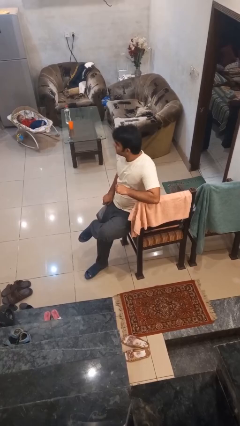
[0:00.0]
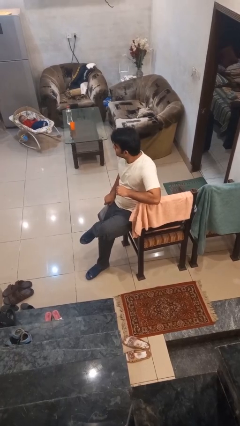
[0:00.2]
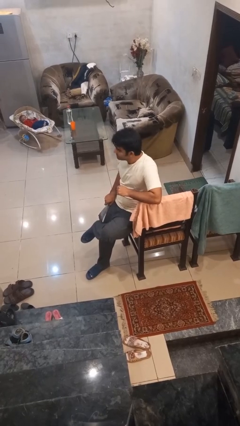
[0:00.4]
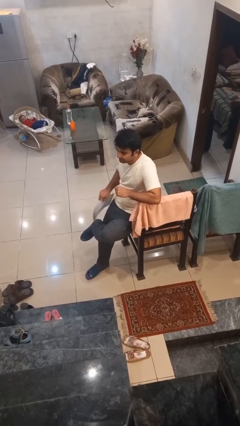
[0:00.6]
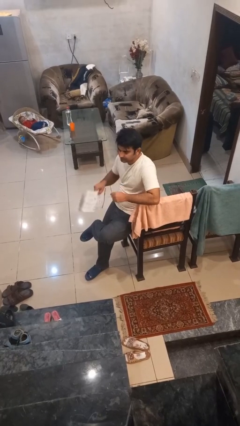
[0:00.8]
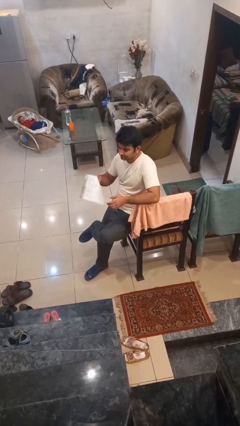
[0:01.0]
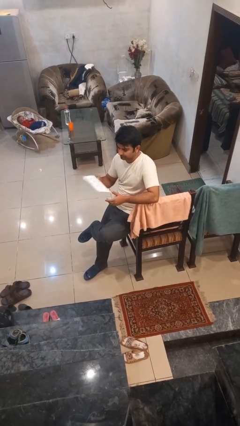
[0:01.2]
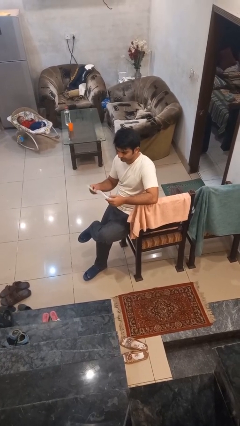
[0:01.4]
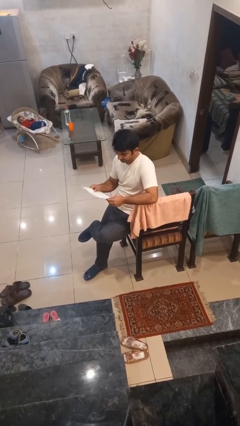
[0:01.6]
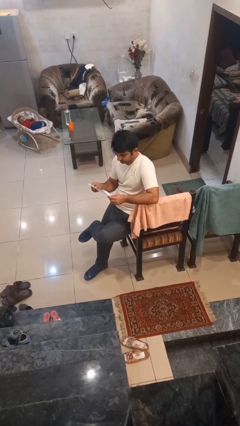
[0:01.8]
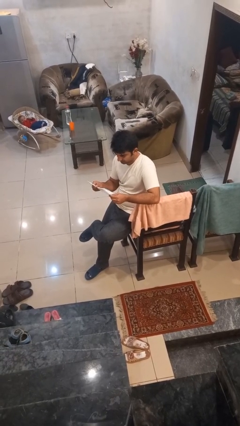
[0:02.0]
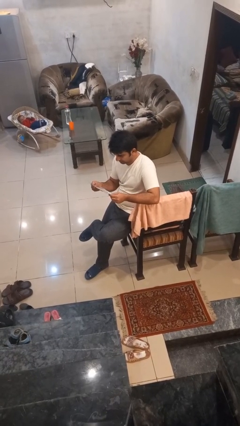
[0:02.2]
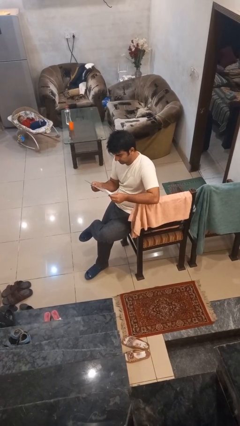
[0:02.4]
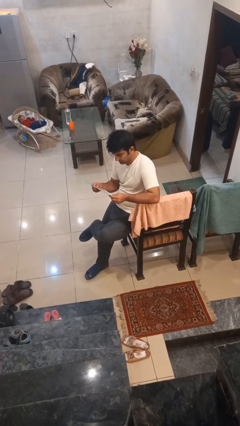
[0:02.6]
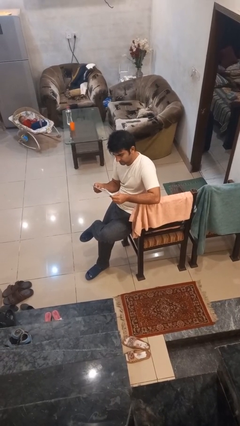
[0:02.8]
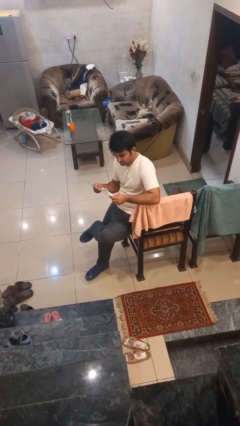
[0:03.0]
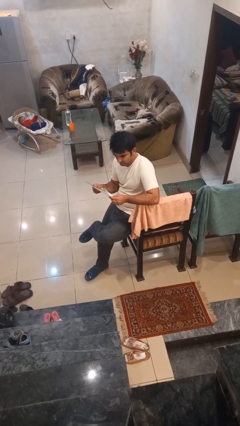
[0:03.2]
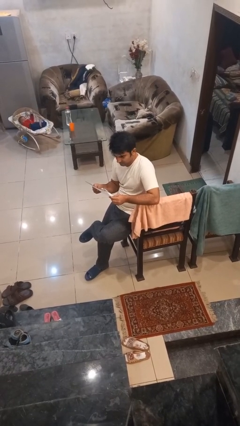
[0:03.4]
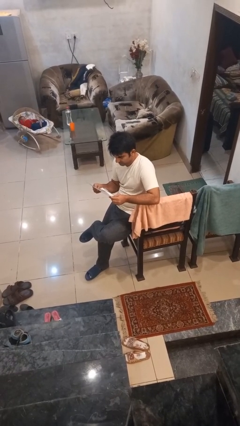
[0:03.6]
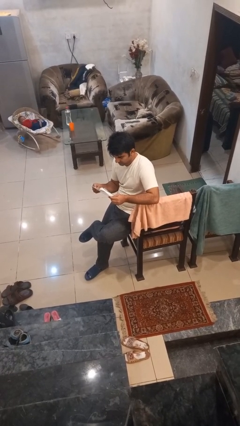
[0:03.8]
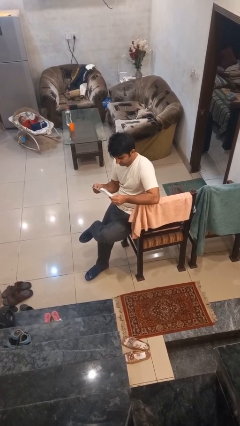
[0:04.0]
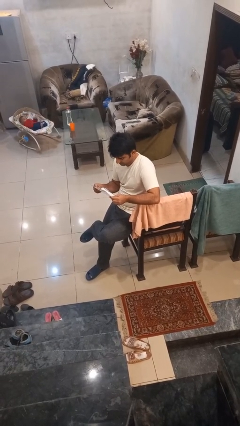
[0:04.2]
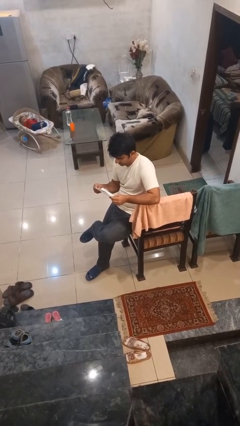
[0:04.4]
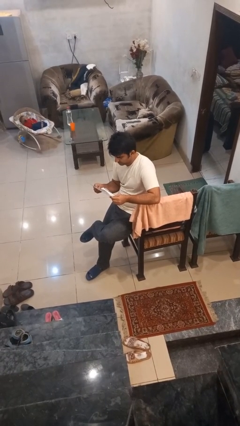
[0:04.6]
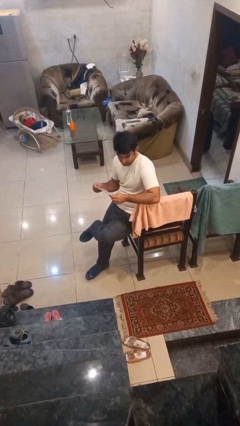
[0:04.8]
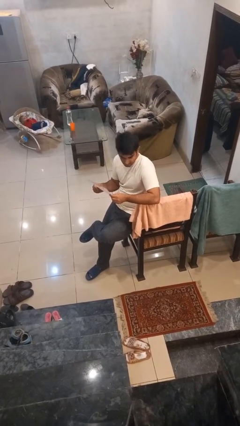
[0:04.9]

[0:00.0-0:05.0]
person reads document

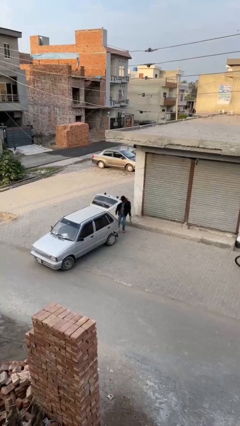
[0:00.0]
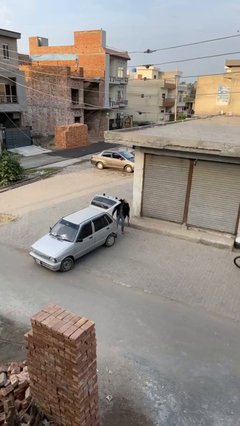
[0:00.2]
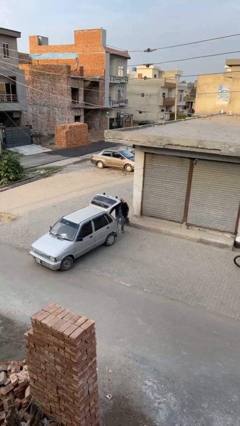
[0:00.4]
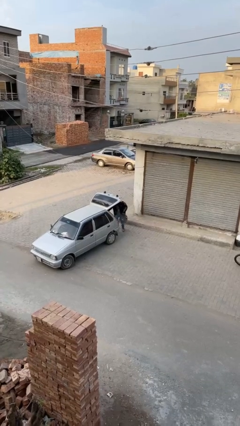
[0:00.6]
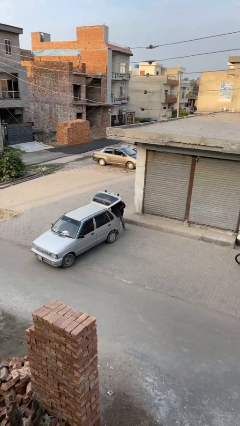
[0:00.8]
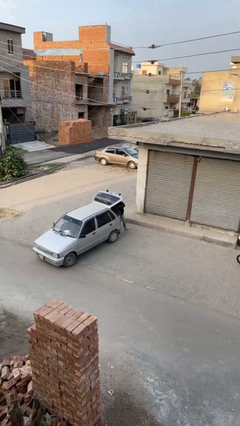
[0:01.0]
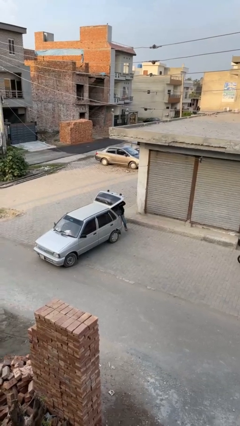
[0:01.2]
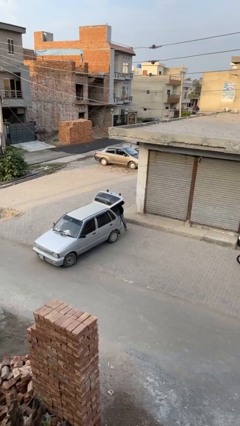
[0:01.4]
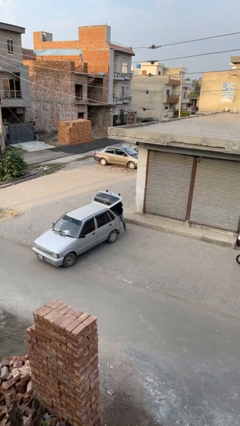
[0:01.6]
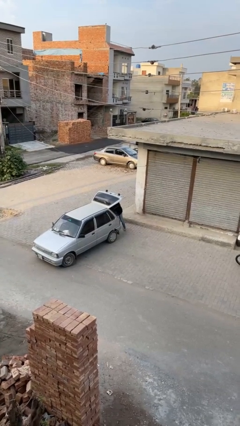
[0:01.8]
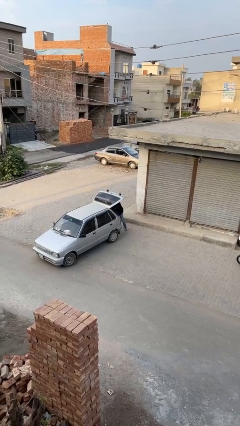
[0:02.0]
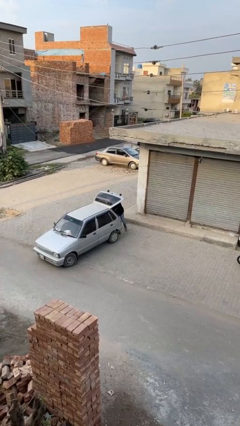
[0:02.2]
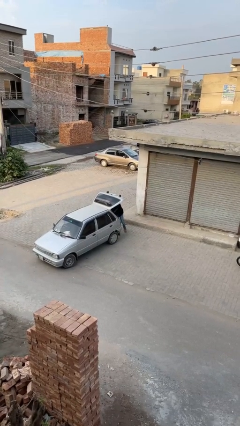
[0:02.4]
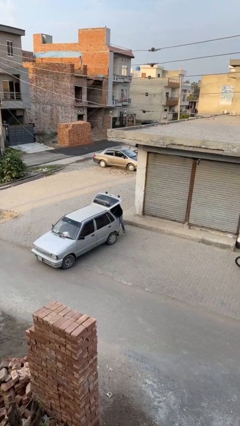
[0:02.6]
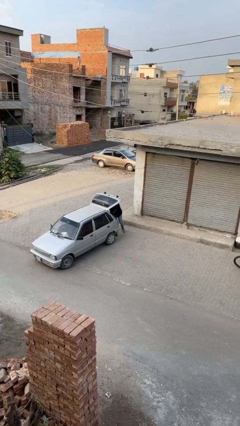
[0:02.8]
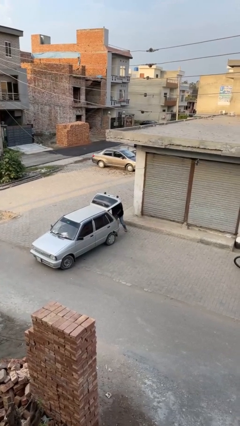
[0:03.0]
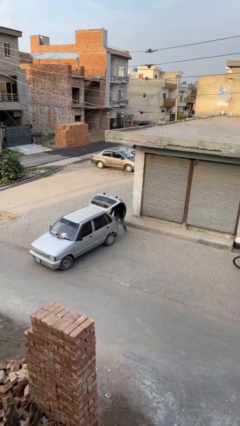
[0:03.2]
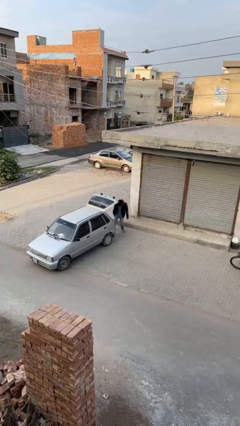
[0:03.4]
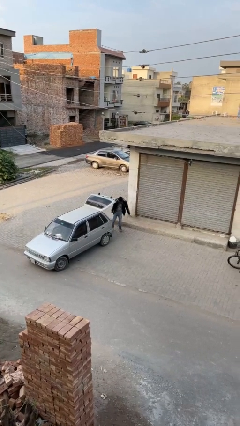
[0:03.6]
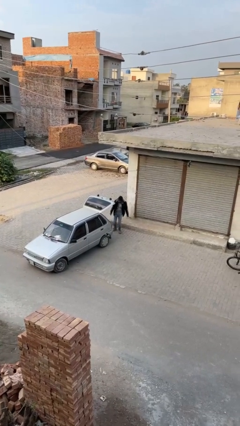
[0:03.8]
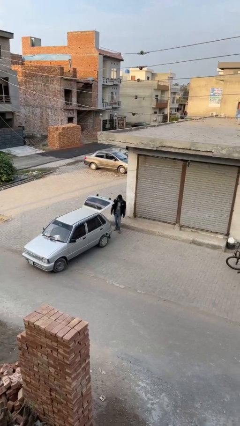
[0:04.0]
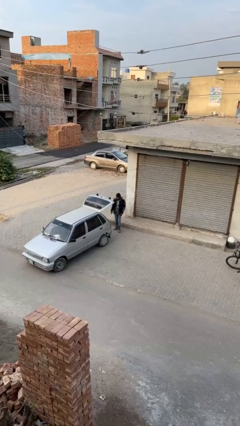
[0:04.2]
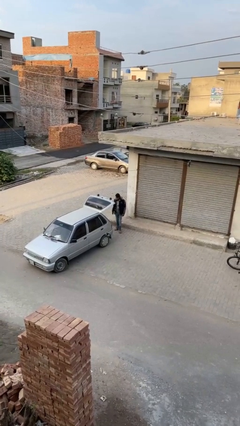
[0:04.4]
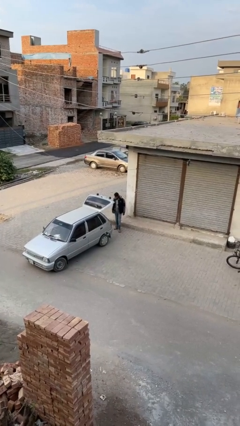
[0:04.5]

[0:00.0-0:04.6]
person loads car

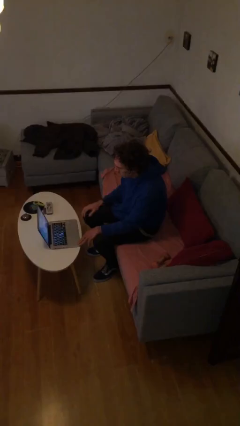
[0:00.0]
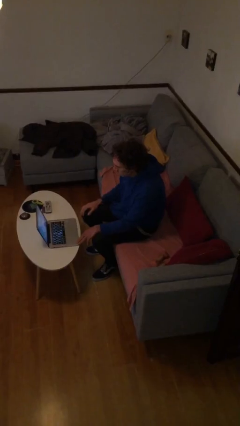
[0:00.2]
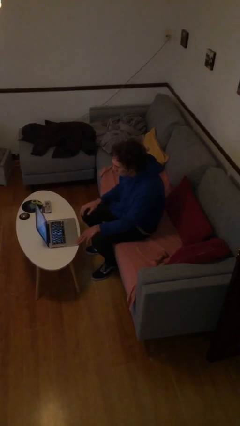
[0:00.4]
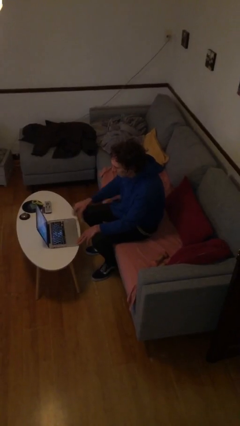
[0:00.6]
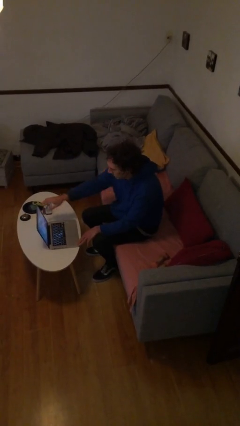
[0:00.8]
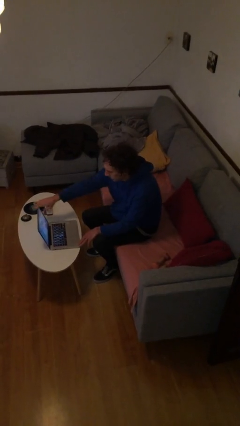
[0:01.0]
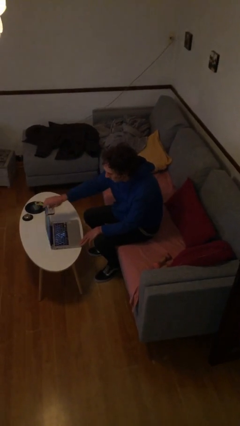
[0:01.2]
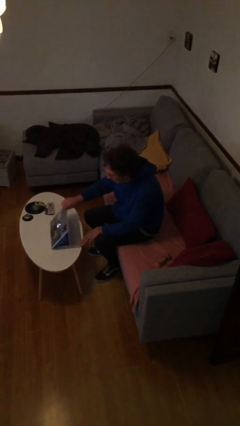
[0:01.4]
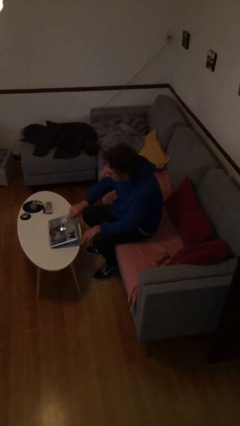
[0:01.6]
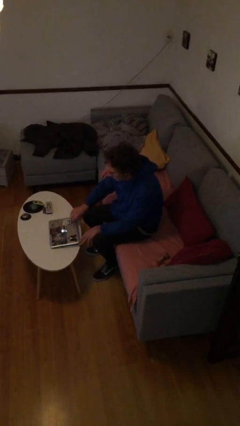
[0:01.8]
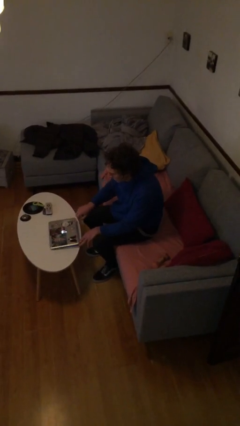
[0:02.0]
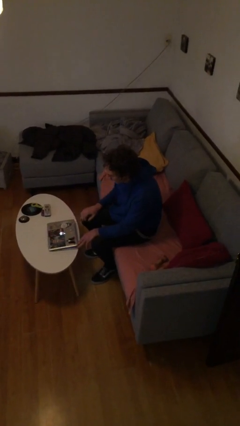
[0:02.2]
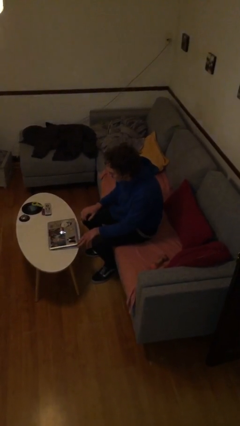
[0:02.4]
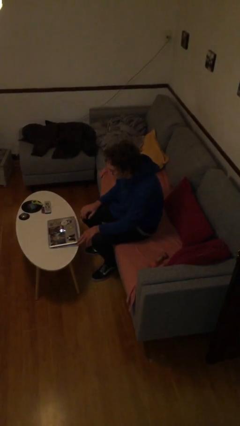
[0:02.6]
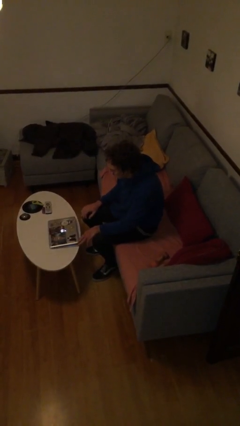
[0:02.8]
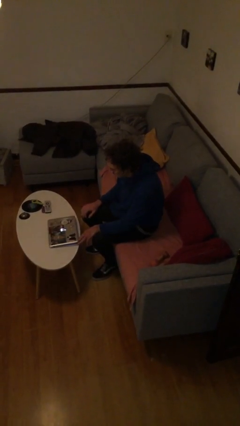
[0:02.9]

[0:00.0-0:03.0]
person closes laptop

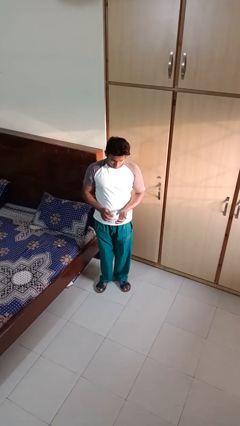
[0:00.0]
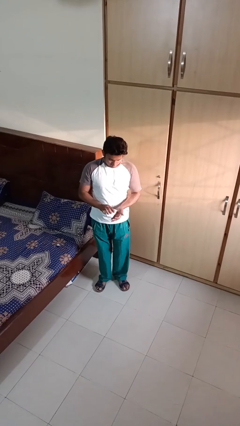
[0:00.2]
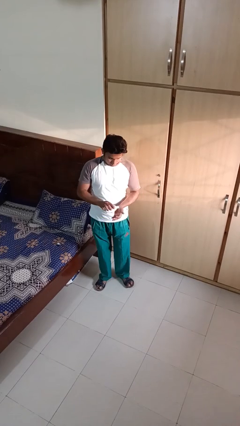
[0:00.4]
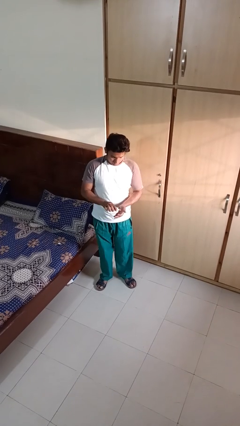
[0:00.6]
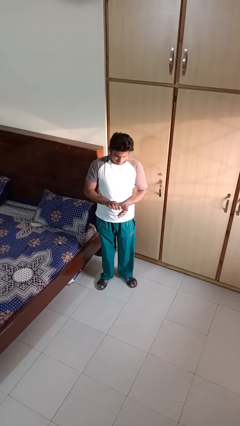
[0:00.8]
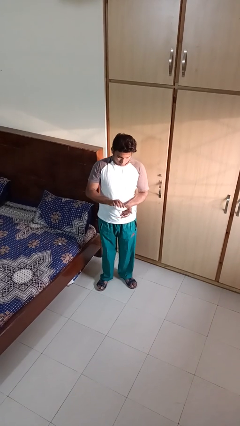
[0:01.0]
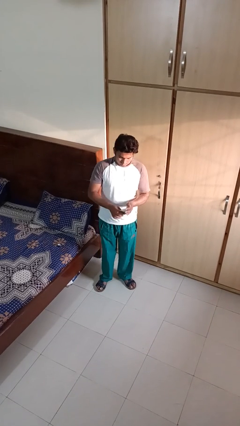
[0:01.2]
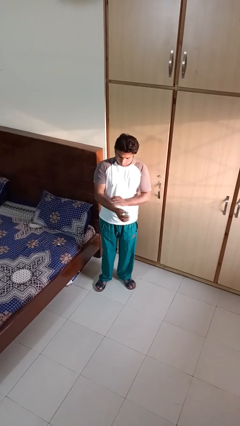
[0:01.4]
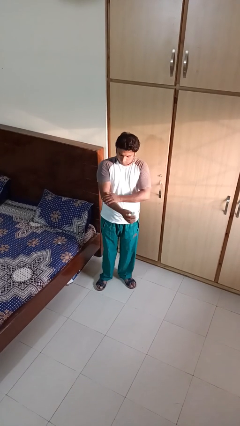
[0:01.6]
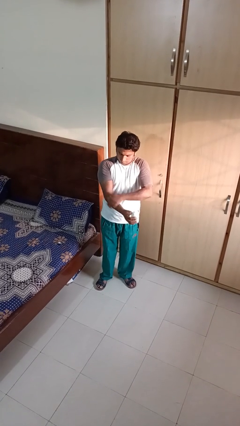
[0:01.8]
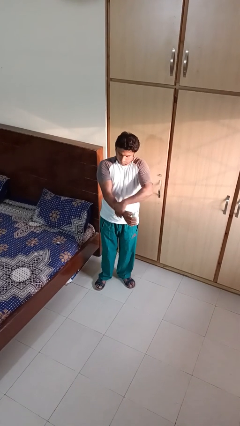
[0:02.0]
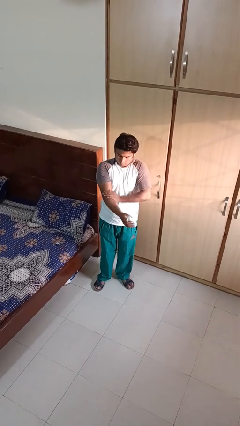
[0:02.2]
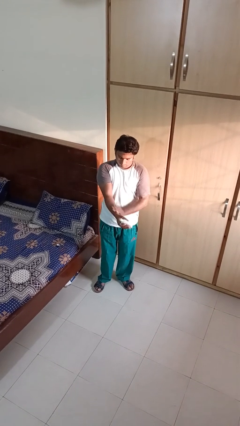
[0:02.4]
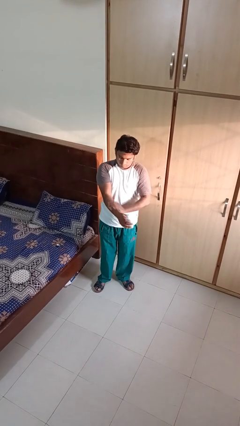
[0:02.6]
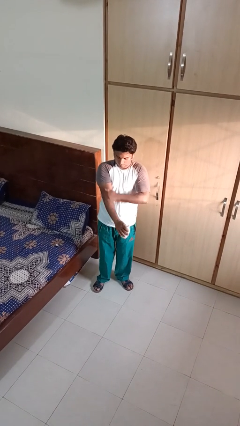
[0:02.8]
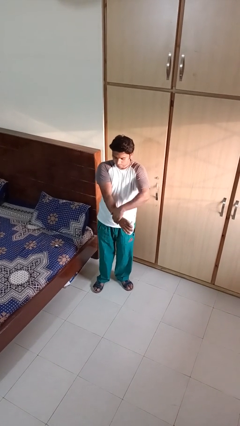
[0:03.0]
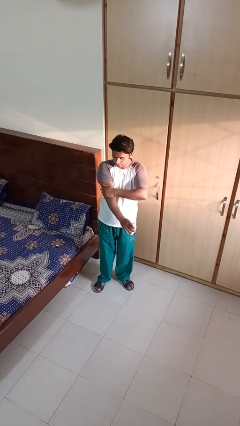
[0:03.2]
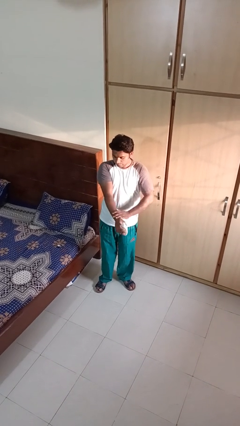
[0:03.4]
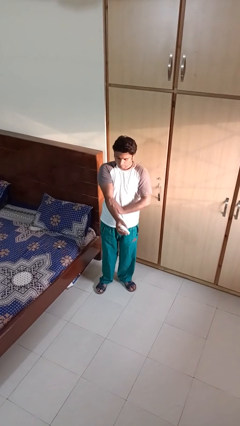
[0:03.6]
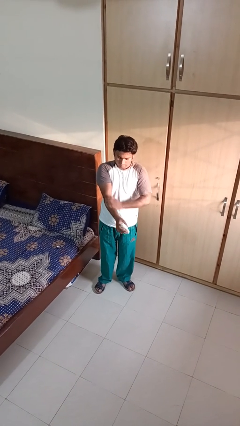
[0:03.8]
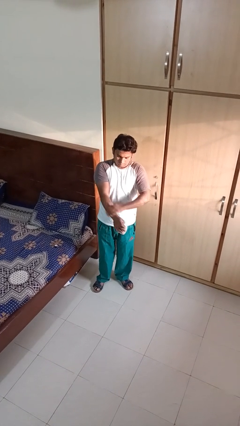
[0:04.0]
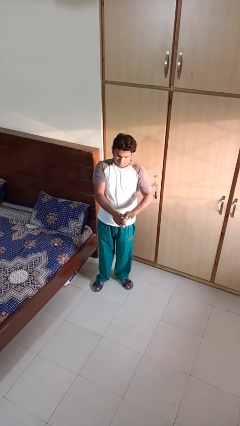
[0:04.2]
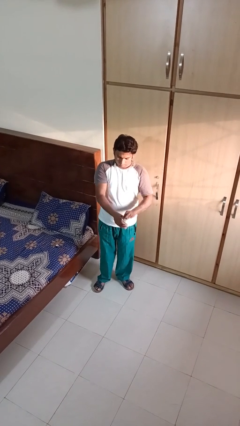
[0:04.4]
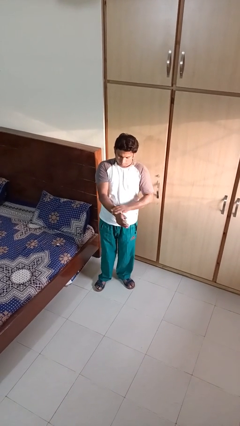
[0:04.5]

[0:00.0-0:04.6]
person applies sunscreen
